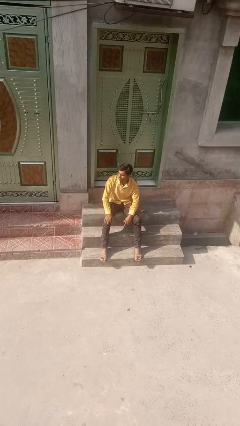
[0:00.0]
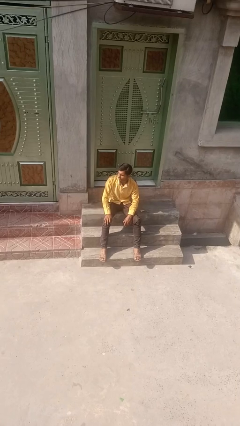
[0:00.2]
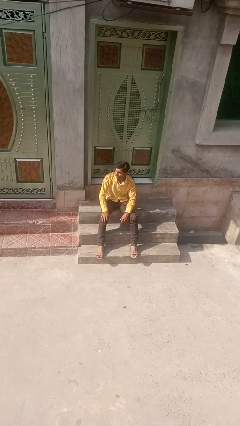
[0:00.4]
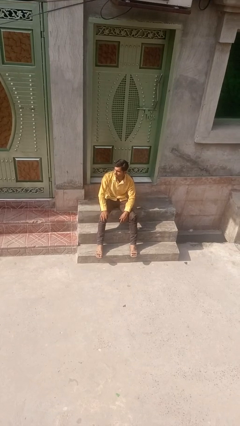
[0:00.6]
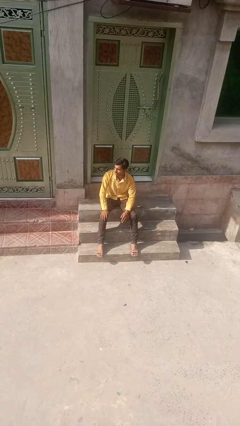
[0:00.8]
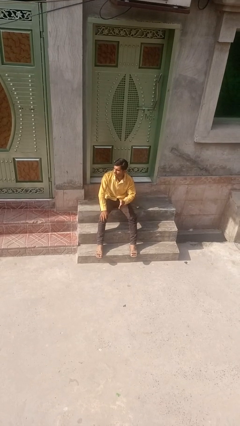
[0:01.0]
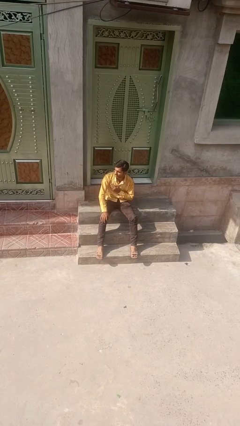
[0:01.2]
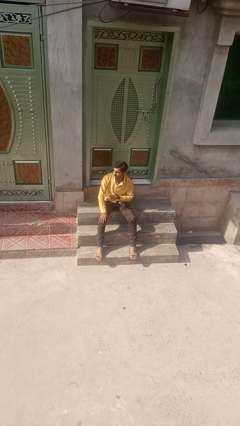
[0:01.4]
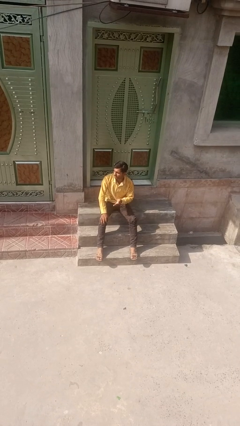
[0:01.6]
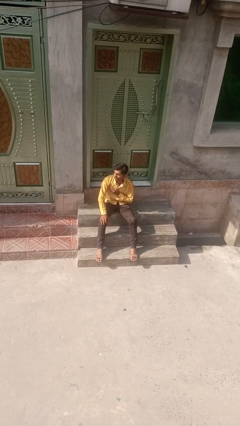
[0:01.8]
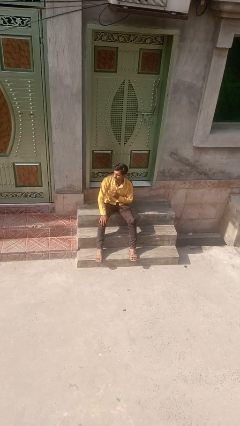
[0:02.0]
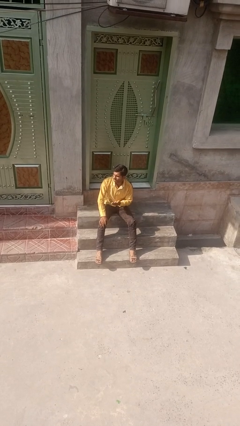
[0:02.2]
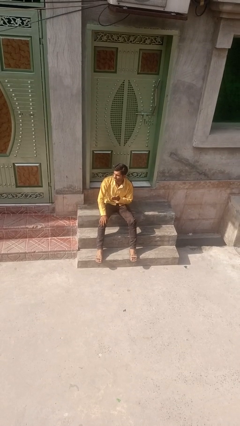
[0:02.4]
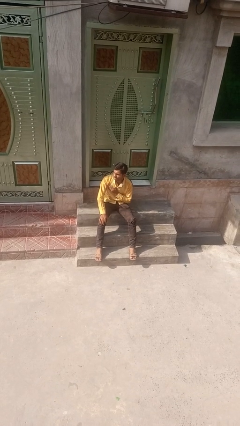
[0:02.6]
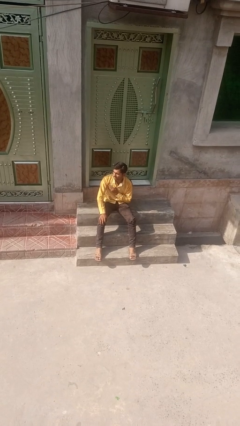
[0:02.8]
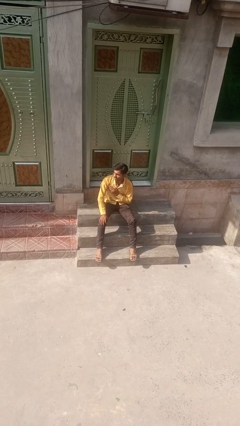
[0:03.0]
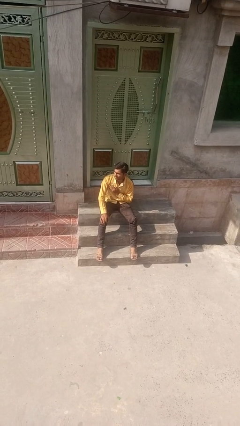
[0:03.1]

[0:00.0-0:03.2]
person drums on chest

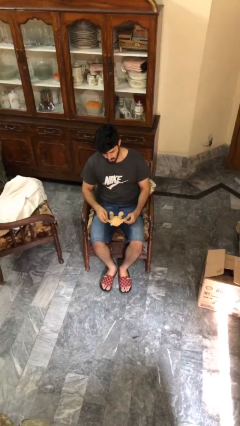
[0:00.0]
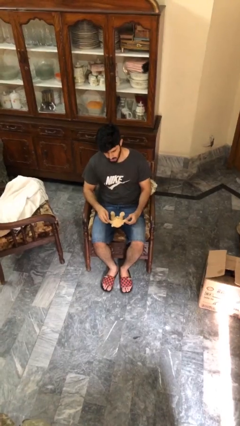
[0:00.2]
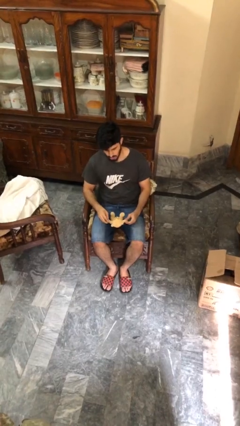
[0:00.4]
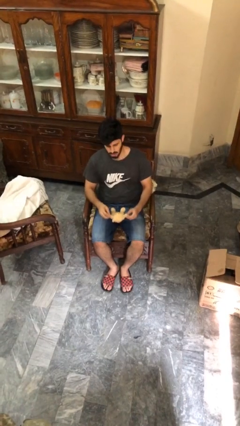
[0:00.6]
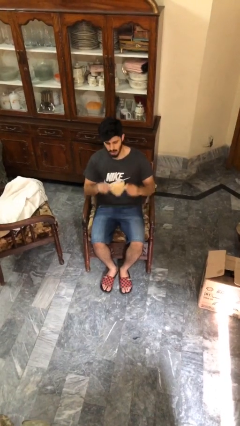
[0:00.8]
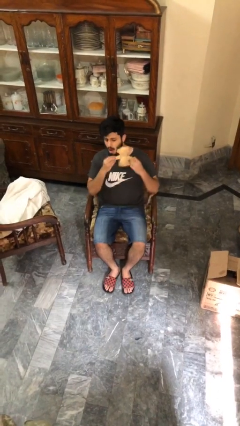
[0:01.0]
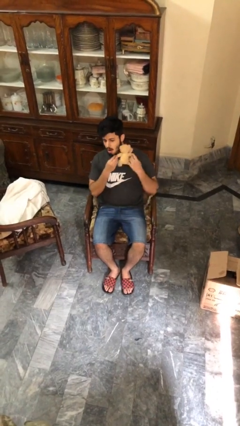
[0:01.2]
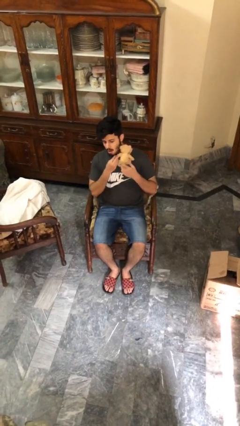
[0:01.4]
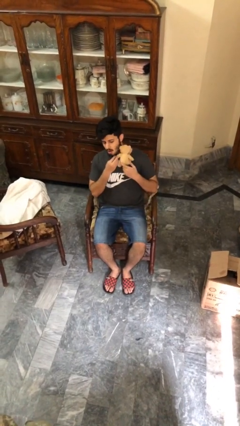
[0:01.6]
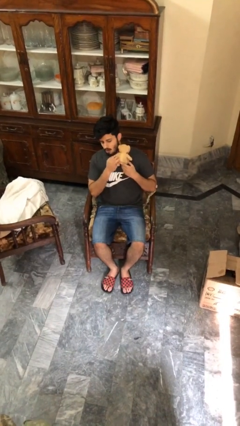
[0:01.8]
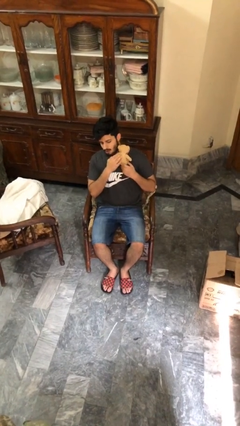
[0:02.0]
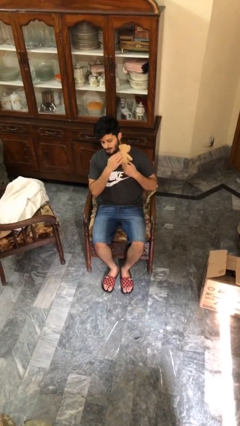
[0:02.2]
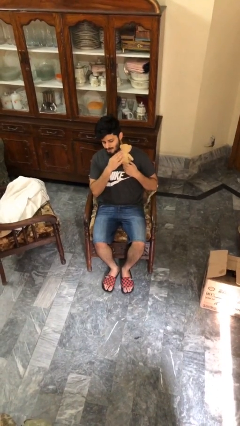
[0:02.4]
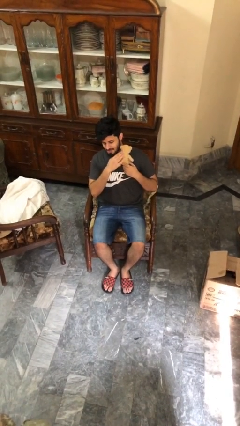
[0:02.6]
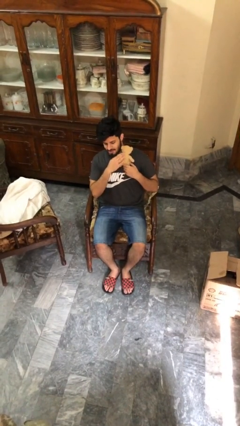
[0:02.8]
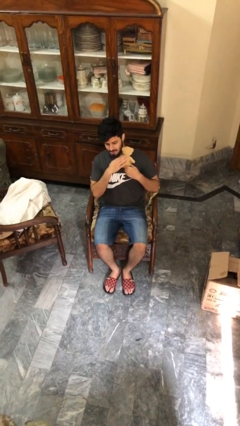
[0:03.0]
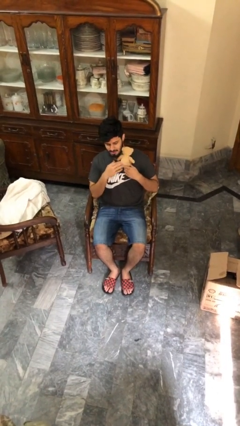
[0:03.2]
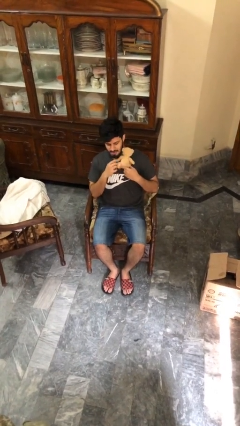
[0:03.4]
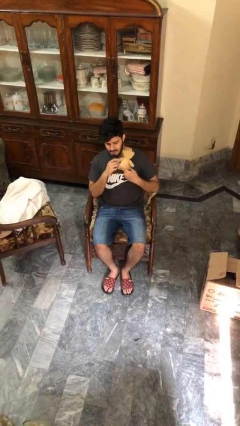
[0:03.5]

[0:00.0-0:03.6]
person hugs stuffed animal

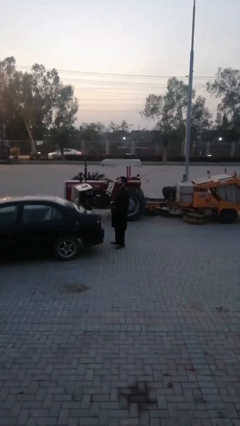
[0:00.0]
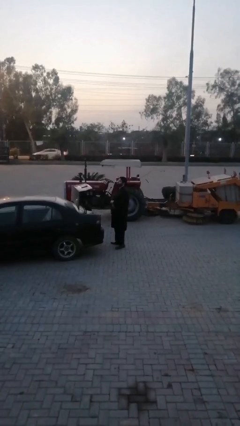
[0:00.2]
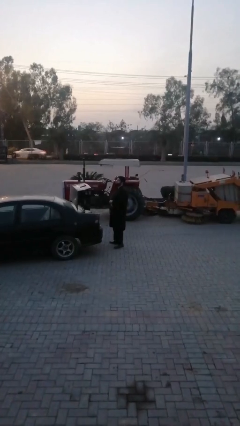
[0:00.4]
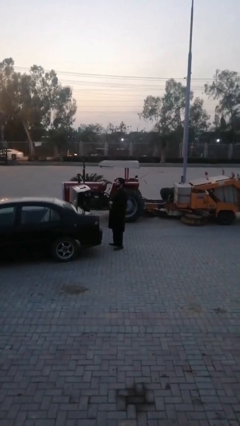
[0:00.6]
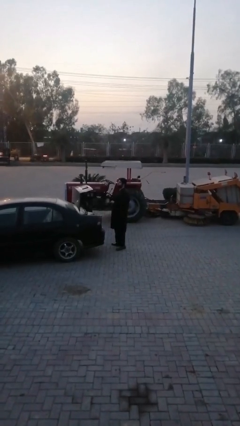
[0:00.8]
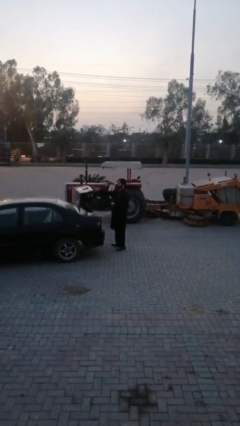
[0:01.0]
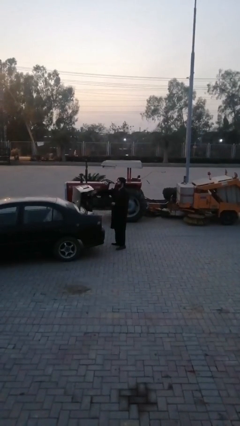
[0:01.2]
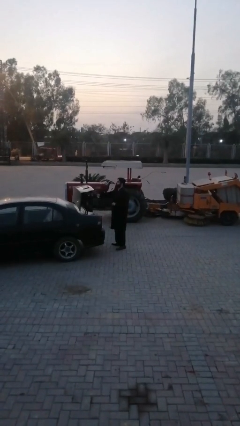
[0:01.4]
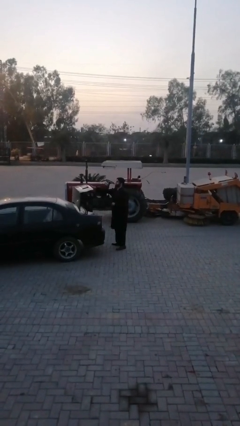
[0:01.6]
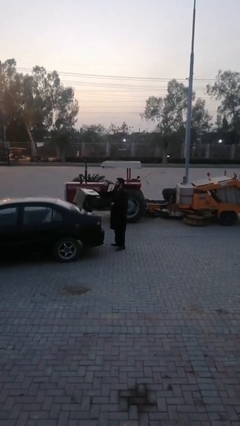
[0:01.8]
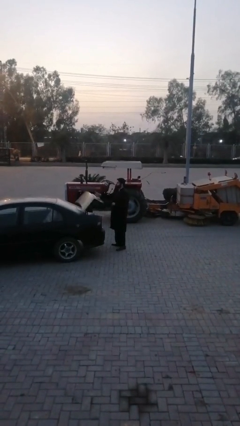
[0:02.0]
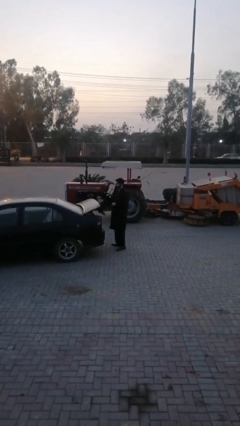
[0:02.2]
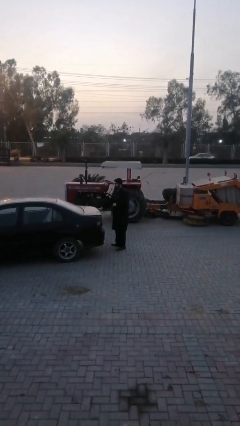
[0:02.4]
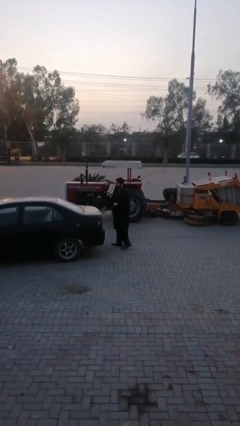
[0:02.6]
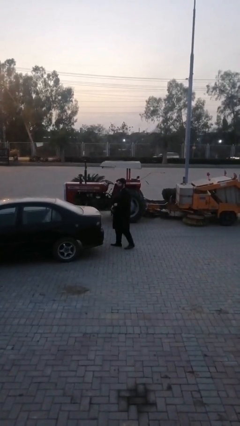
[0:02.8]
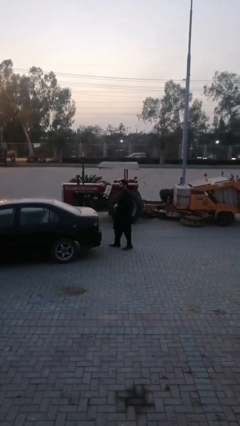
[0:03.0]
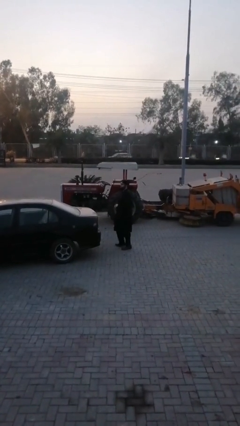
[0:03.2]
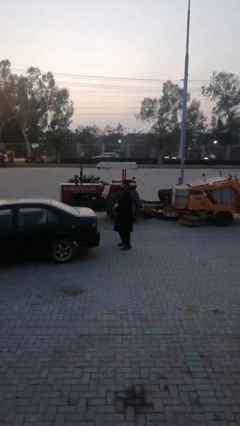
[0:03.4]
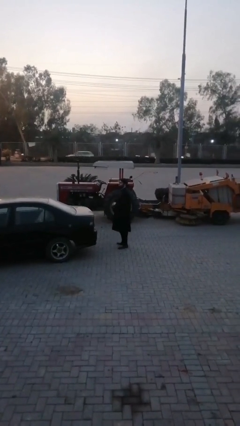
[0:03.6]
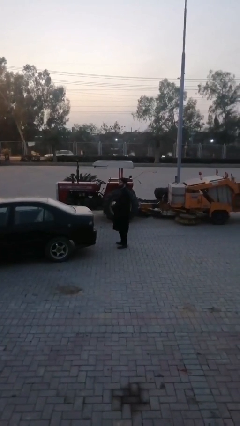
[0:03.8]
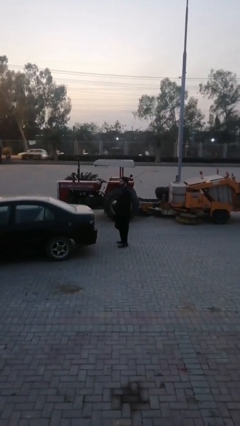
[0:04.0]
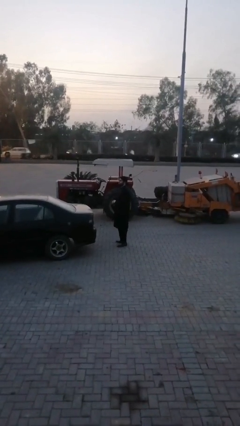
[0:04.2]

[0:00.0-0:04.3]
person closes car trunk

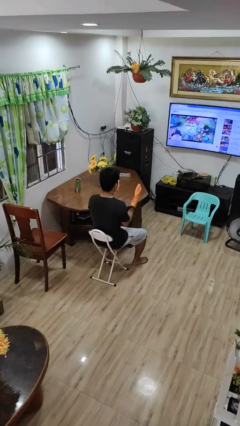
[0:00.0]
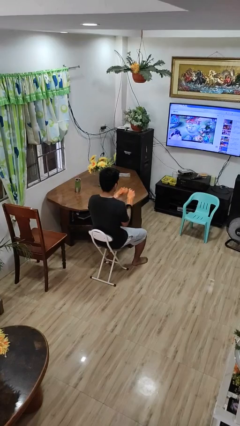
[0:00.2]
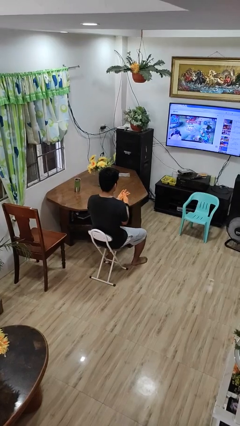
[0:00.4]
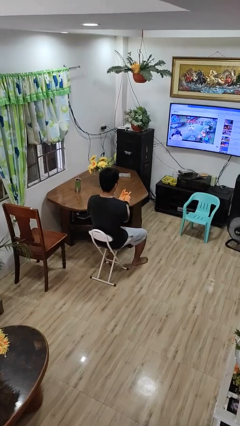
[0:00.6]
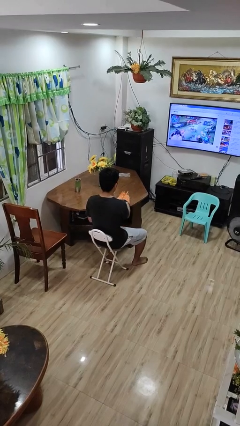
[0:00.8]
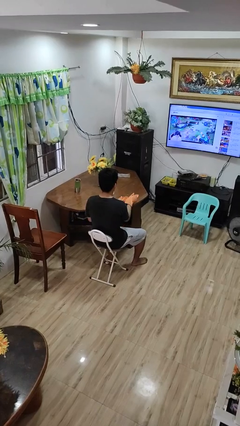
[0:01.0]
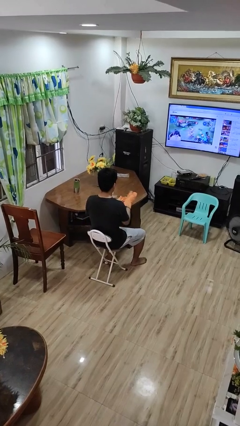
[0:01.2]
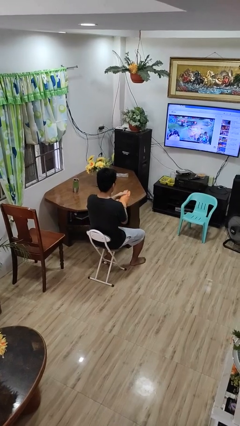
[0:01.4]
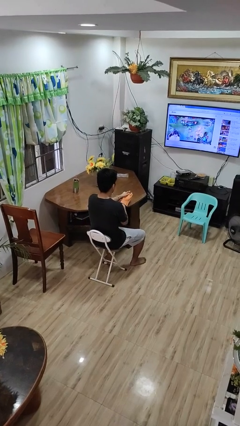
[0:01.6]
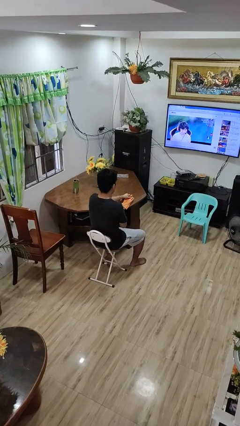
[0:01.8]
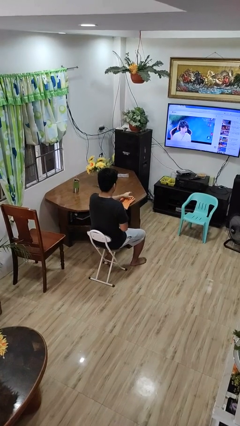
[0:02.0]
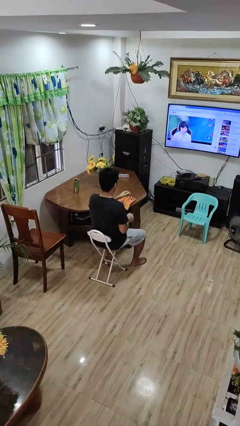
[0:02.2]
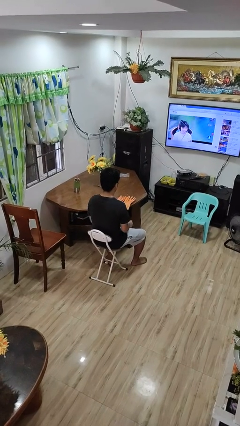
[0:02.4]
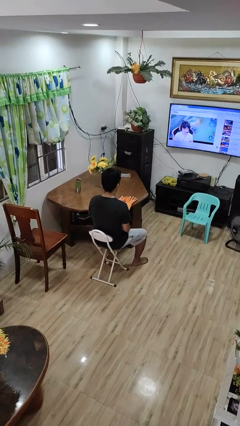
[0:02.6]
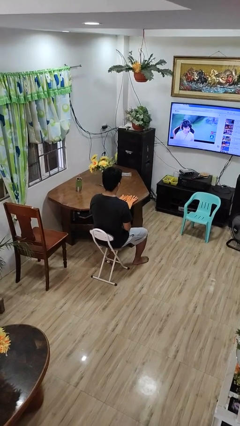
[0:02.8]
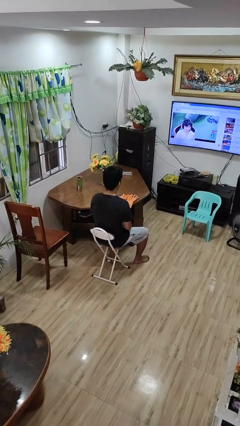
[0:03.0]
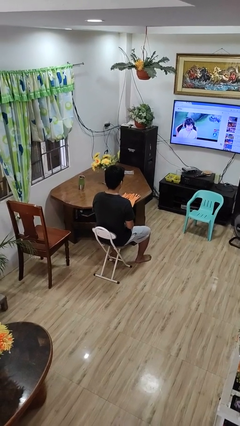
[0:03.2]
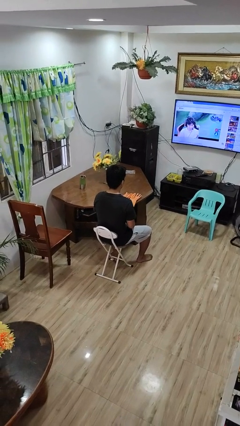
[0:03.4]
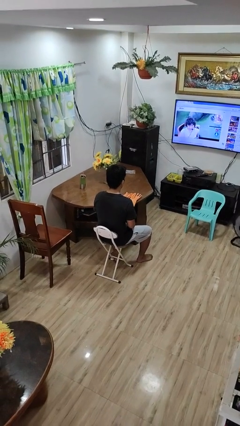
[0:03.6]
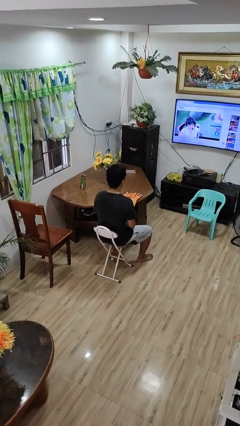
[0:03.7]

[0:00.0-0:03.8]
person takes off gloves

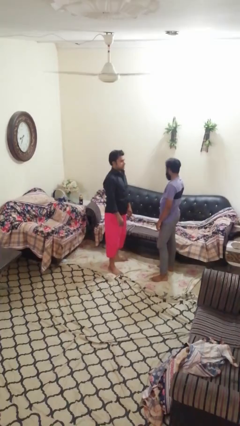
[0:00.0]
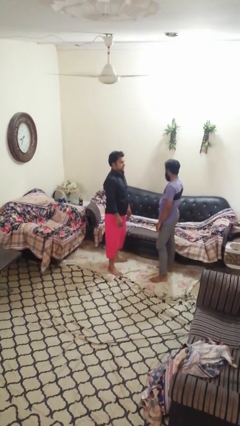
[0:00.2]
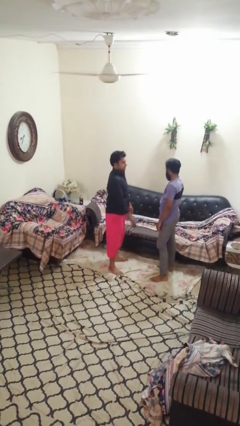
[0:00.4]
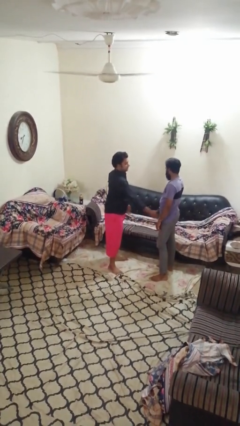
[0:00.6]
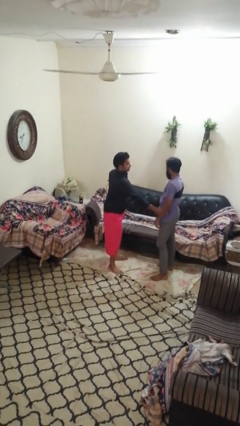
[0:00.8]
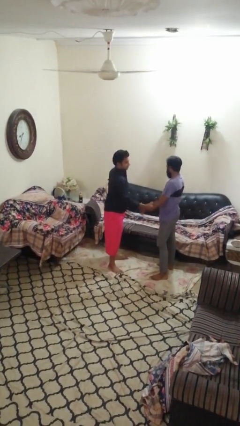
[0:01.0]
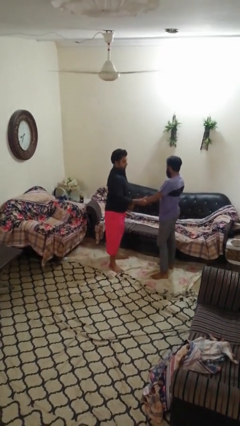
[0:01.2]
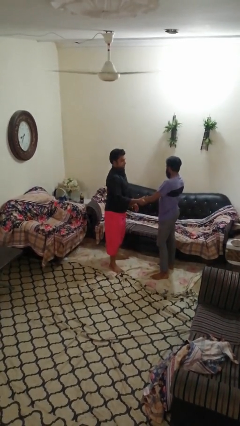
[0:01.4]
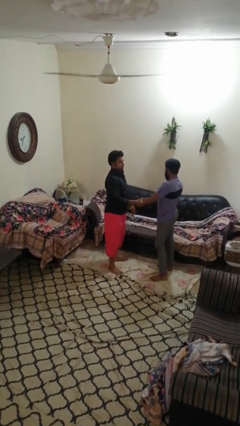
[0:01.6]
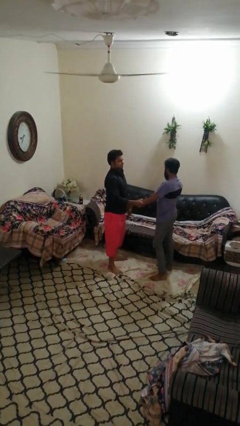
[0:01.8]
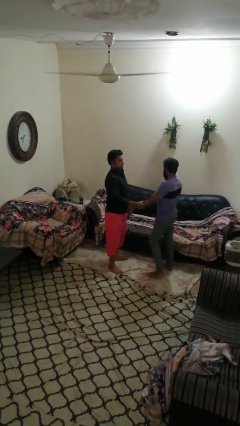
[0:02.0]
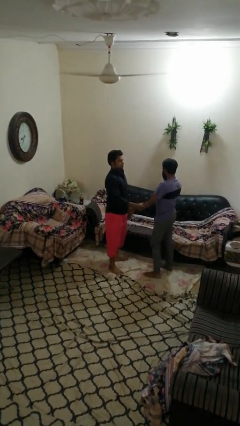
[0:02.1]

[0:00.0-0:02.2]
person grabs person by forearm

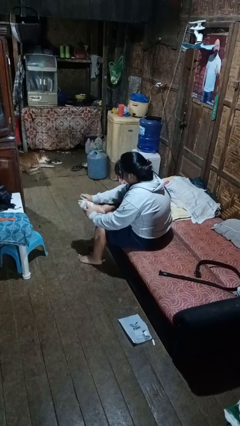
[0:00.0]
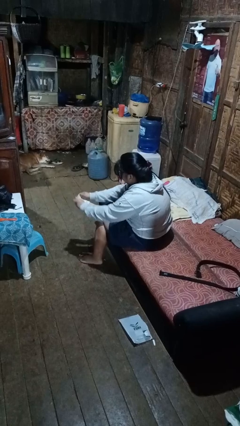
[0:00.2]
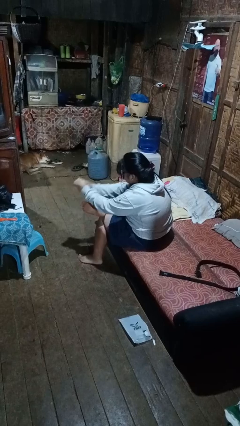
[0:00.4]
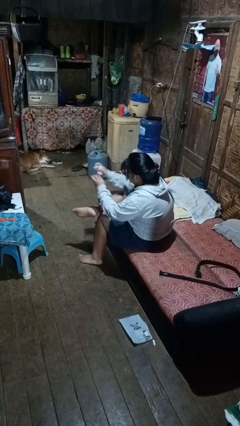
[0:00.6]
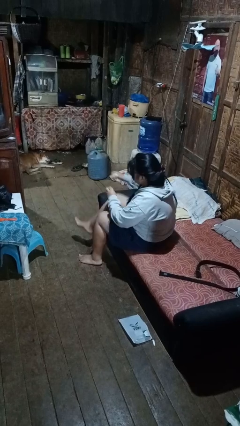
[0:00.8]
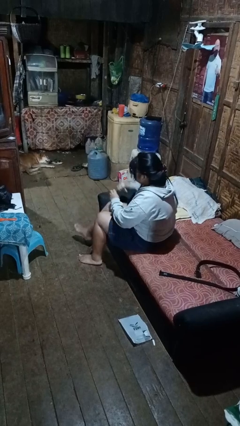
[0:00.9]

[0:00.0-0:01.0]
person takes off socks
